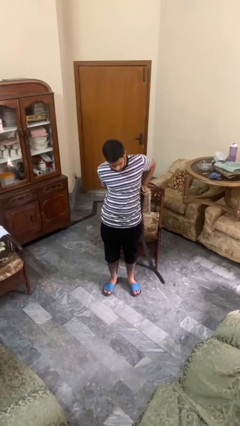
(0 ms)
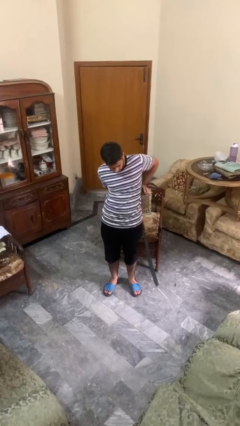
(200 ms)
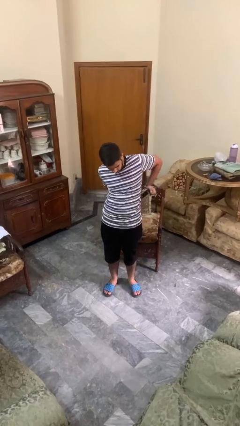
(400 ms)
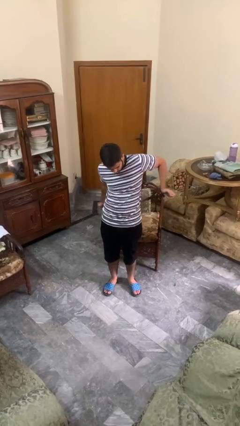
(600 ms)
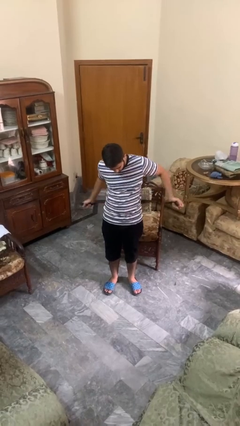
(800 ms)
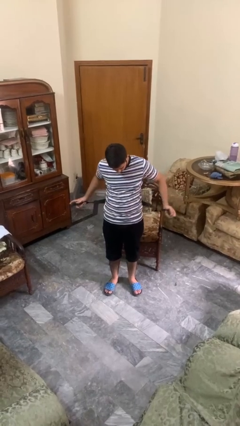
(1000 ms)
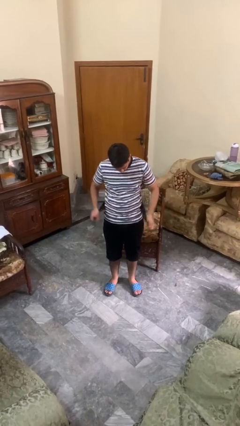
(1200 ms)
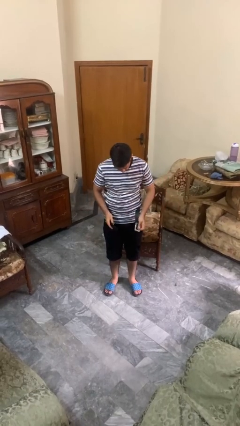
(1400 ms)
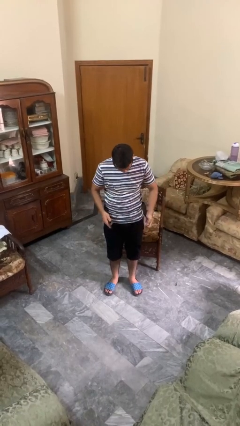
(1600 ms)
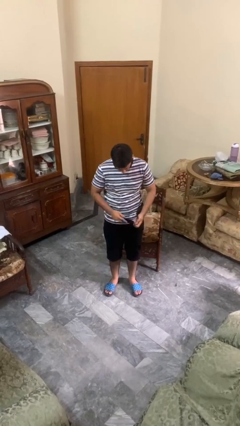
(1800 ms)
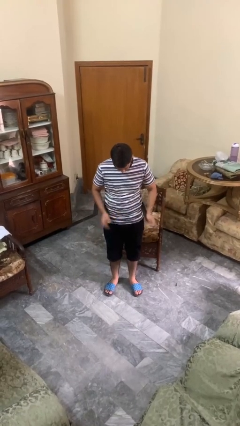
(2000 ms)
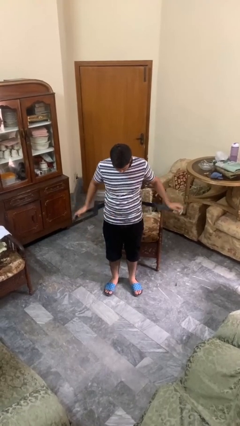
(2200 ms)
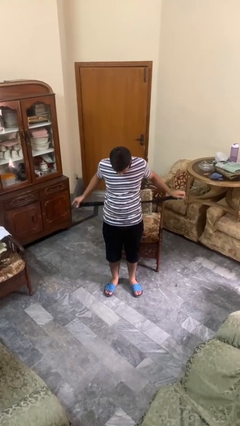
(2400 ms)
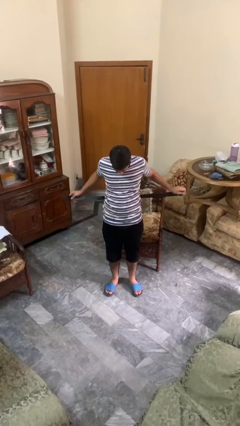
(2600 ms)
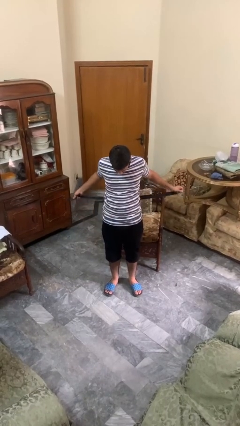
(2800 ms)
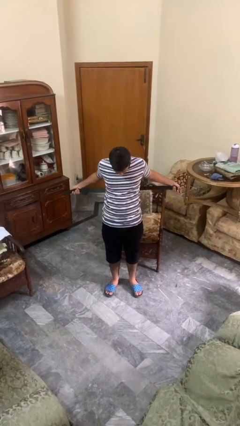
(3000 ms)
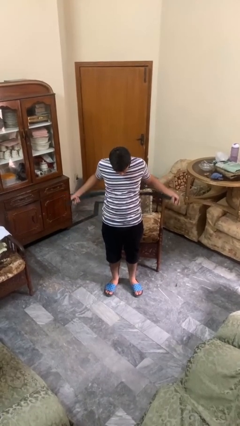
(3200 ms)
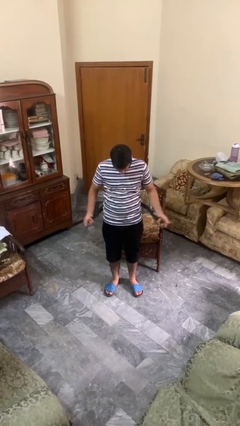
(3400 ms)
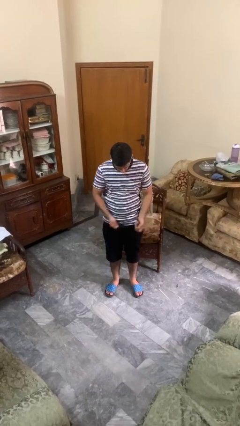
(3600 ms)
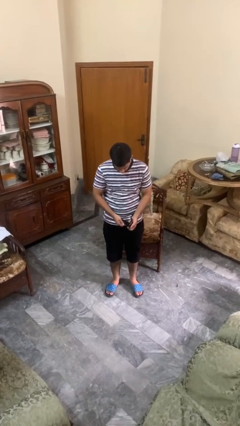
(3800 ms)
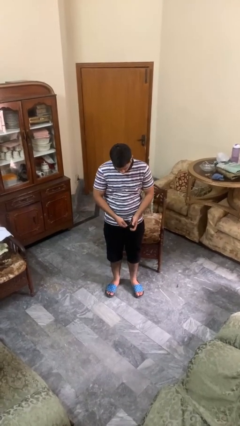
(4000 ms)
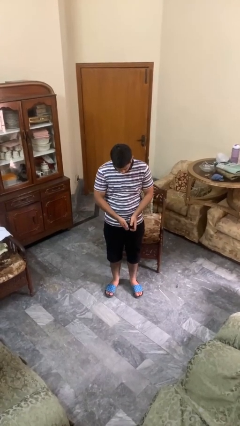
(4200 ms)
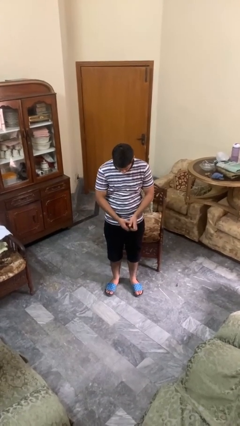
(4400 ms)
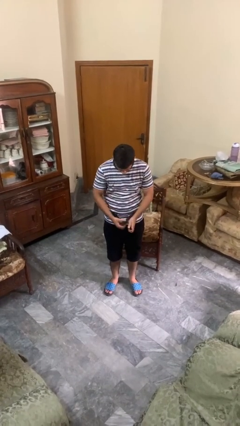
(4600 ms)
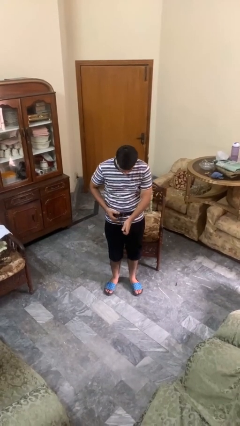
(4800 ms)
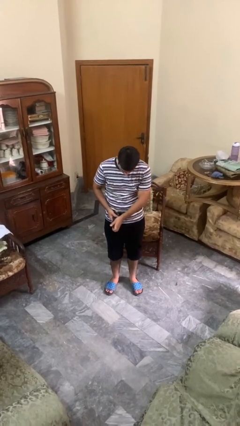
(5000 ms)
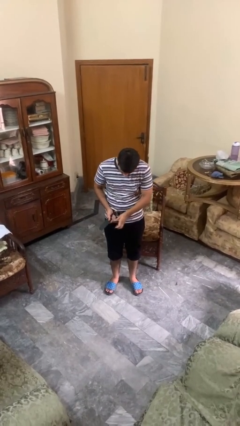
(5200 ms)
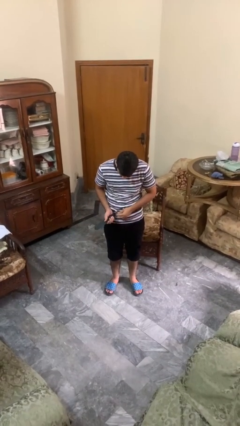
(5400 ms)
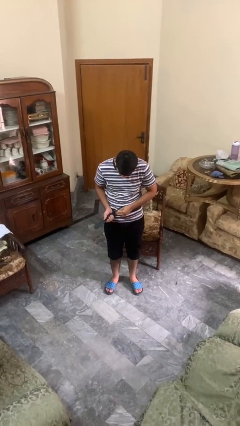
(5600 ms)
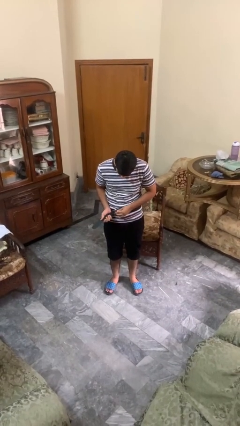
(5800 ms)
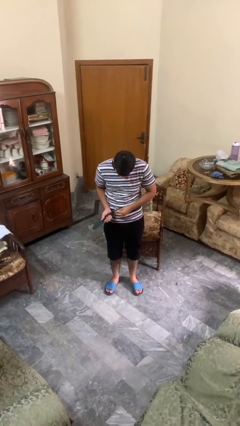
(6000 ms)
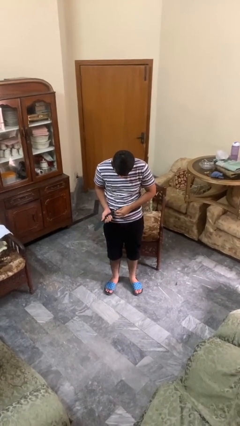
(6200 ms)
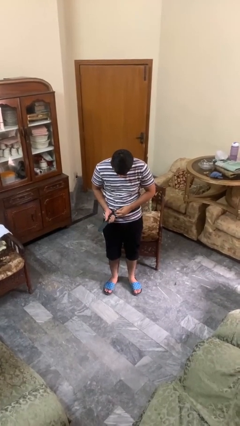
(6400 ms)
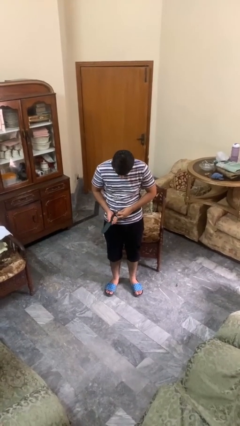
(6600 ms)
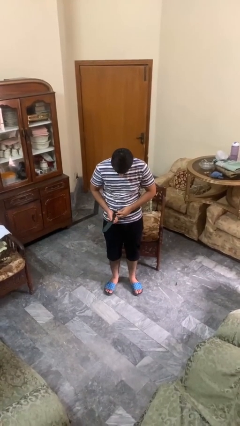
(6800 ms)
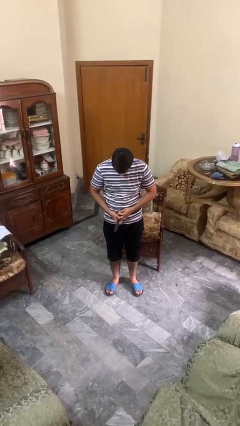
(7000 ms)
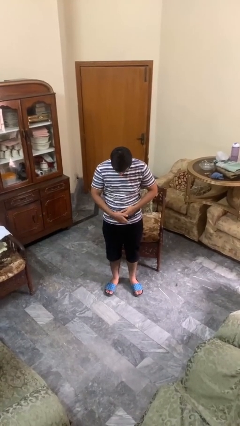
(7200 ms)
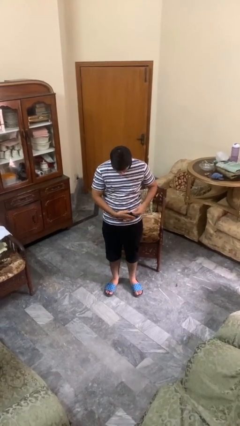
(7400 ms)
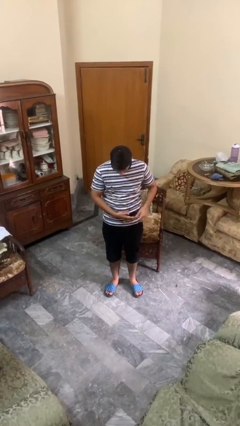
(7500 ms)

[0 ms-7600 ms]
person puts on belt

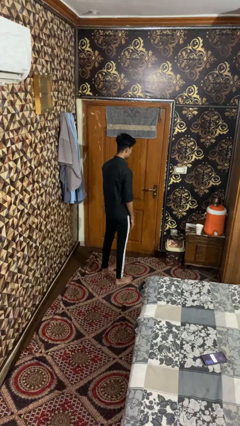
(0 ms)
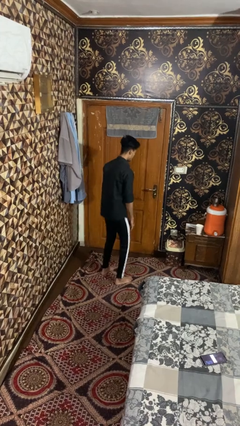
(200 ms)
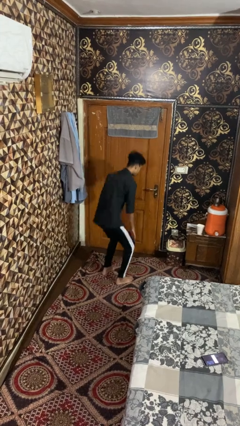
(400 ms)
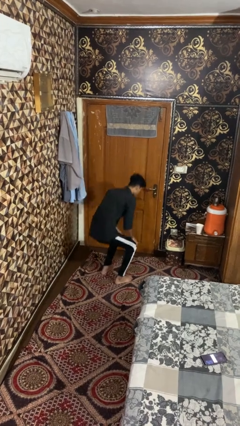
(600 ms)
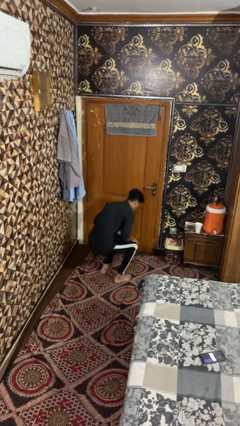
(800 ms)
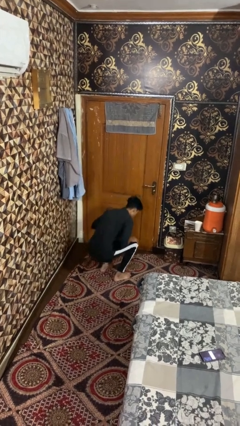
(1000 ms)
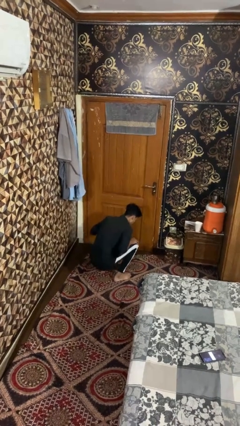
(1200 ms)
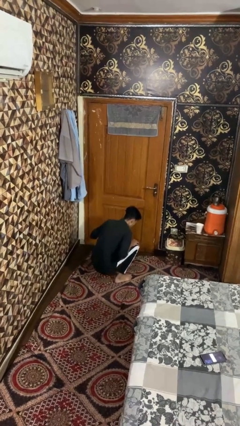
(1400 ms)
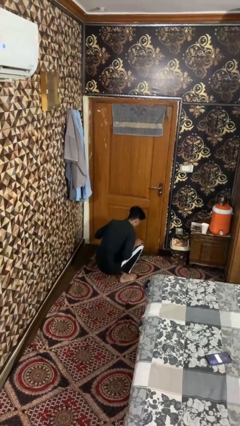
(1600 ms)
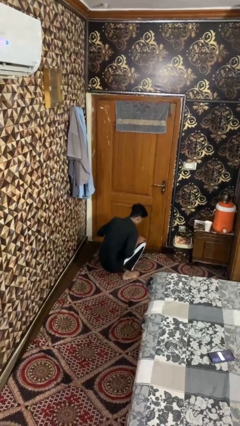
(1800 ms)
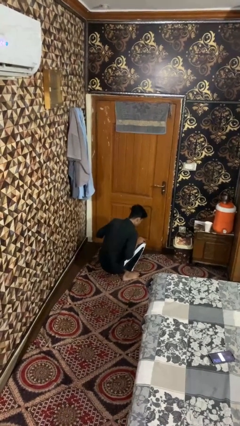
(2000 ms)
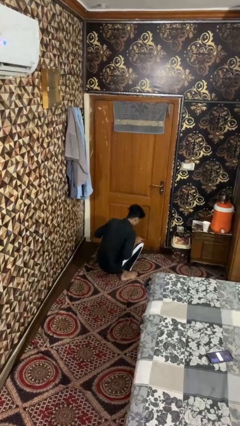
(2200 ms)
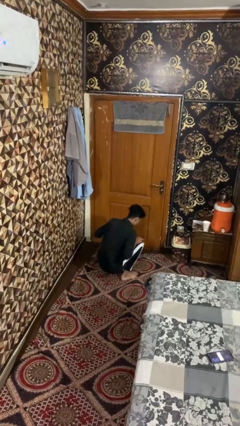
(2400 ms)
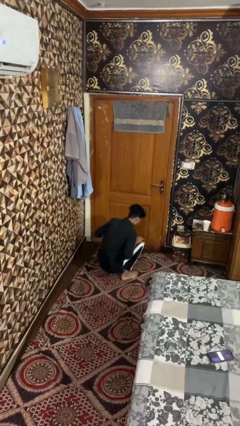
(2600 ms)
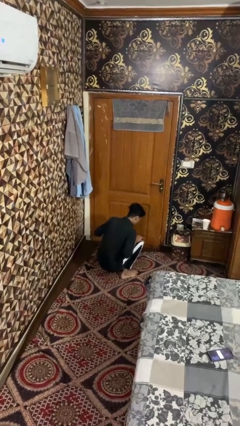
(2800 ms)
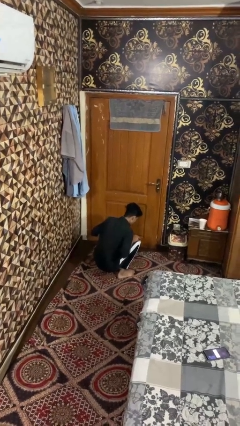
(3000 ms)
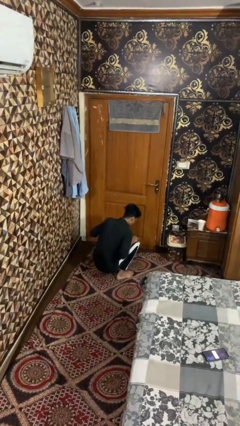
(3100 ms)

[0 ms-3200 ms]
person exercises with situp

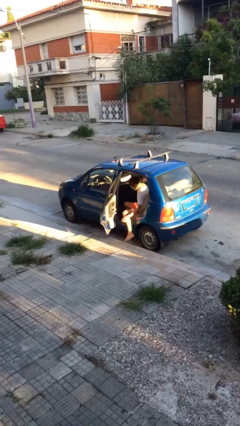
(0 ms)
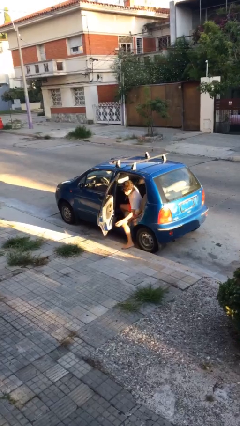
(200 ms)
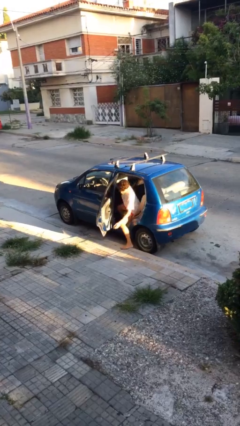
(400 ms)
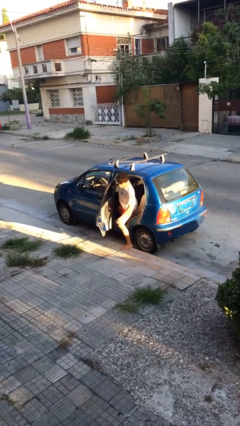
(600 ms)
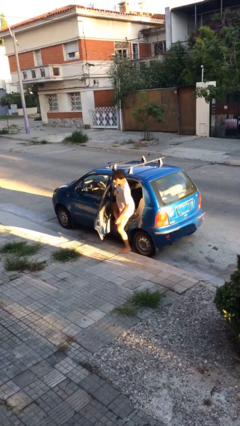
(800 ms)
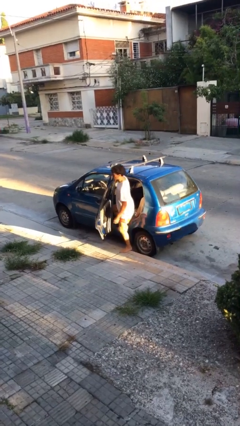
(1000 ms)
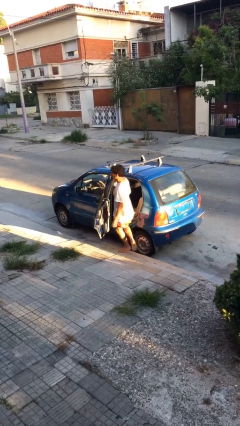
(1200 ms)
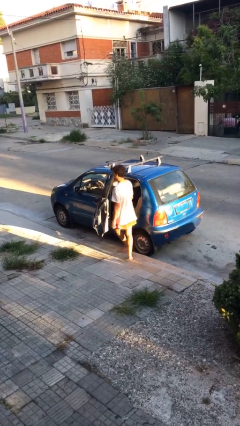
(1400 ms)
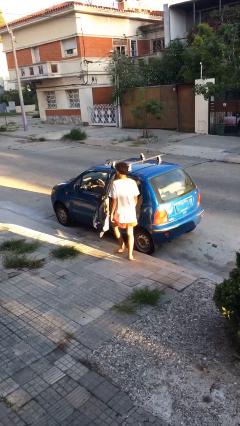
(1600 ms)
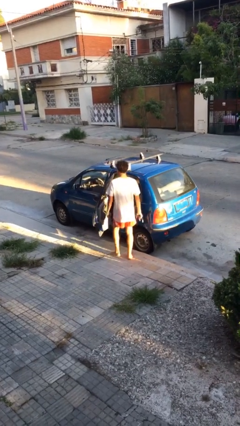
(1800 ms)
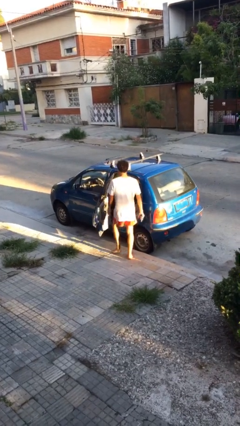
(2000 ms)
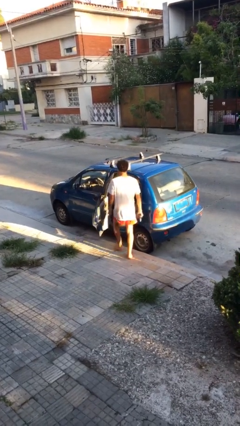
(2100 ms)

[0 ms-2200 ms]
person exits car

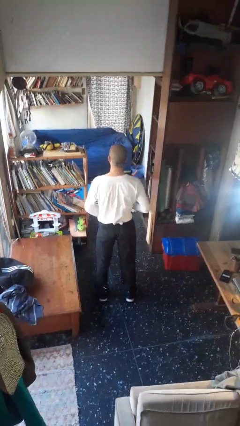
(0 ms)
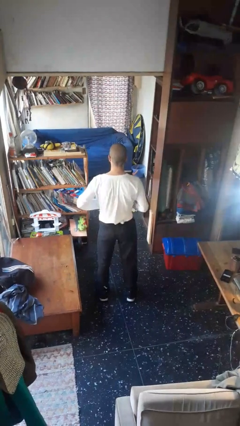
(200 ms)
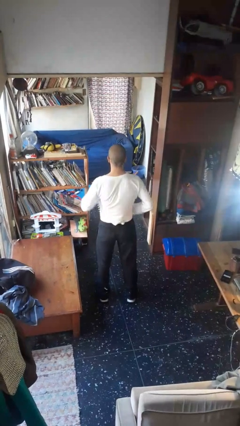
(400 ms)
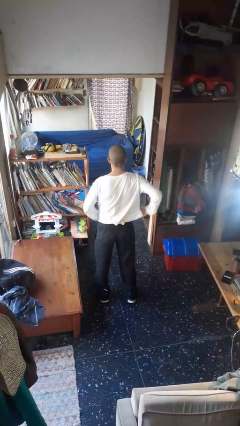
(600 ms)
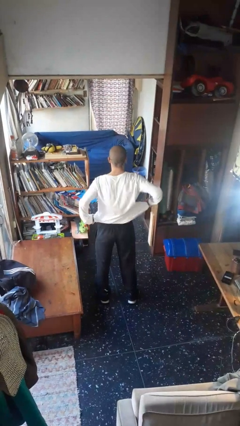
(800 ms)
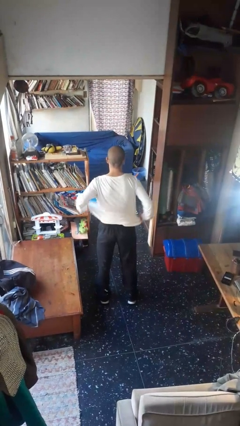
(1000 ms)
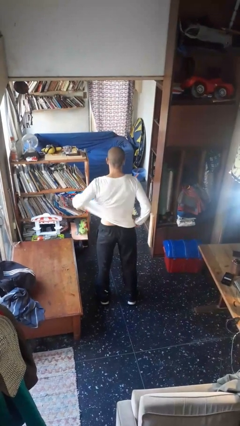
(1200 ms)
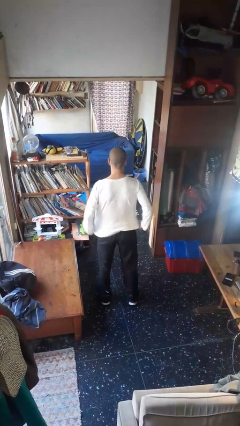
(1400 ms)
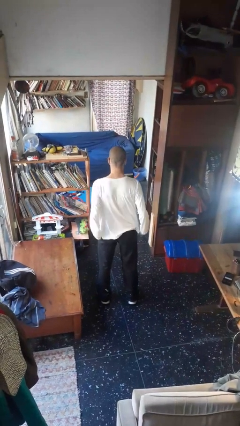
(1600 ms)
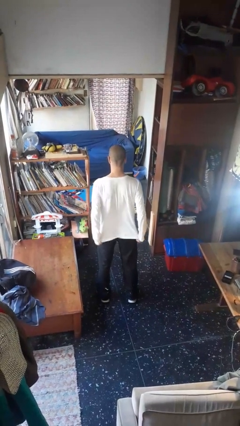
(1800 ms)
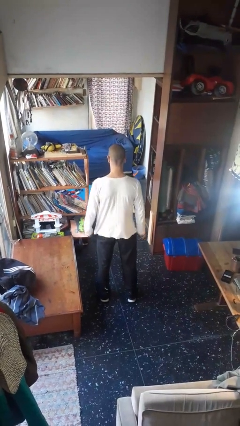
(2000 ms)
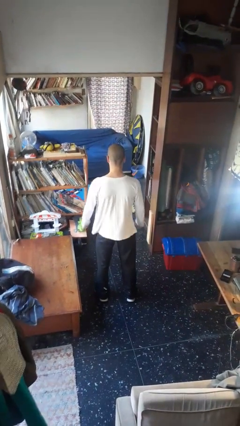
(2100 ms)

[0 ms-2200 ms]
person untucks shirt

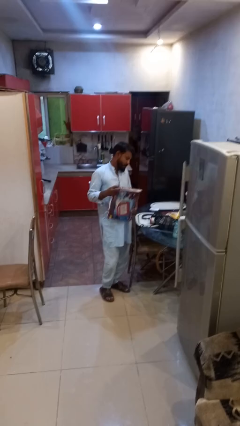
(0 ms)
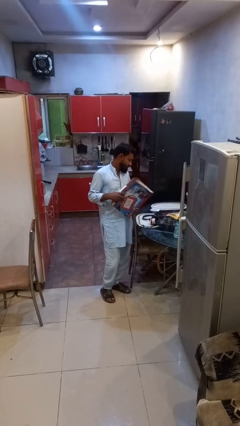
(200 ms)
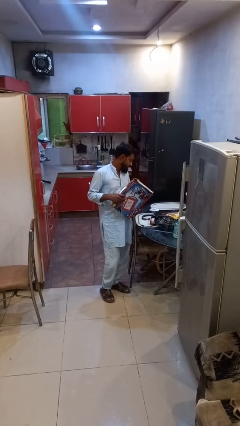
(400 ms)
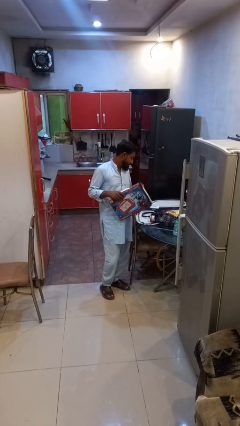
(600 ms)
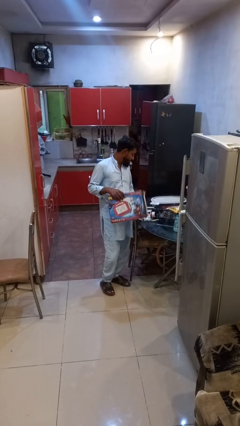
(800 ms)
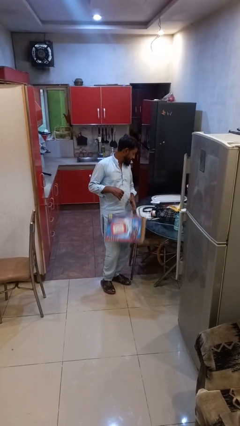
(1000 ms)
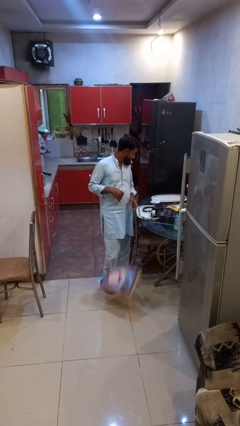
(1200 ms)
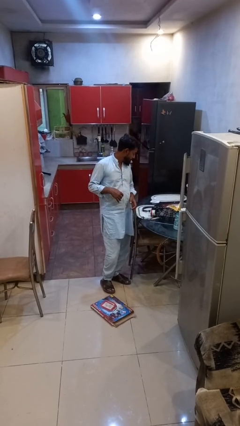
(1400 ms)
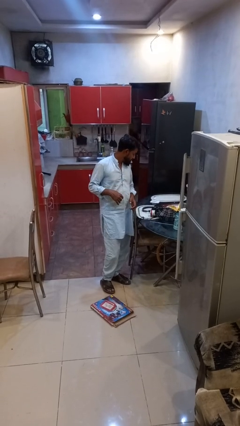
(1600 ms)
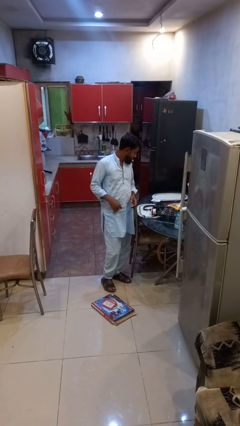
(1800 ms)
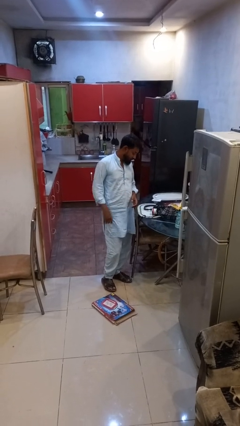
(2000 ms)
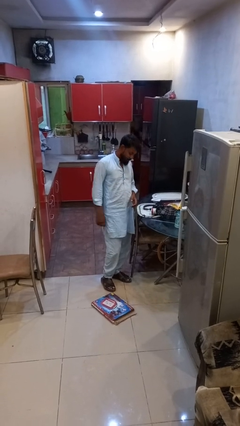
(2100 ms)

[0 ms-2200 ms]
person drops object

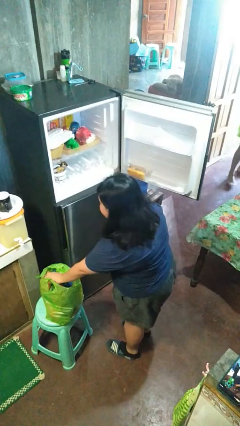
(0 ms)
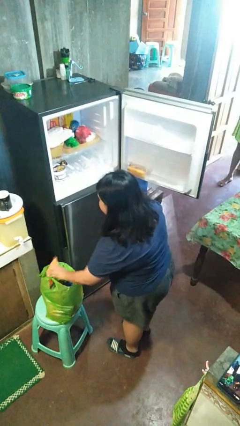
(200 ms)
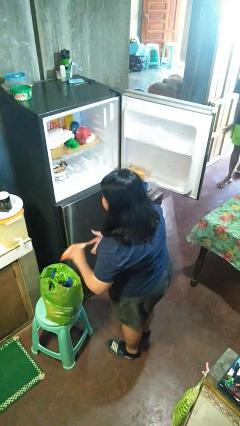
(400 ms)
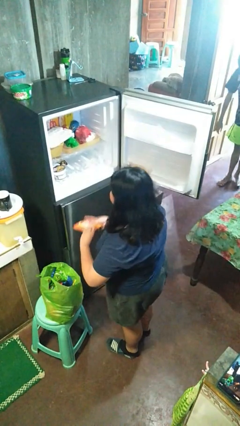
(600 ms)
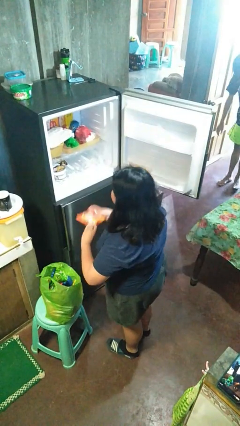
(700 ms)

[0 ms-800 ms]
person loads groceries into refrigerator
